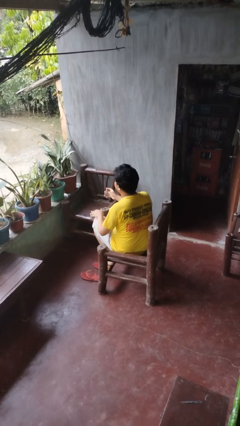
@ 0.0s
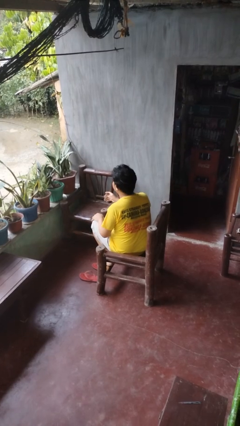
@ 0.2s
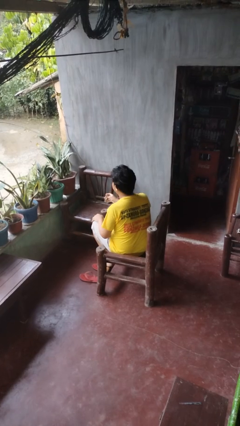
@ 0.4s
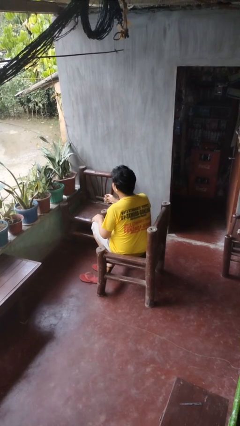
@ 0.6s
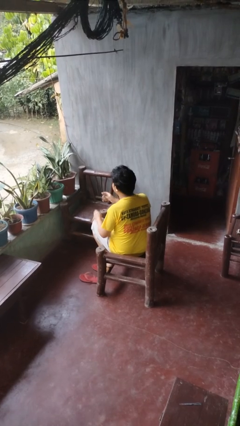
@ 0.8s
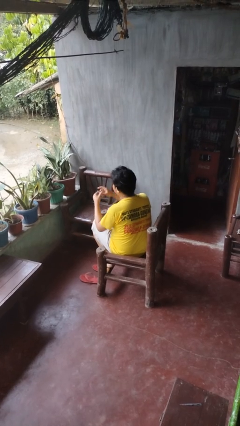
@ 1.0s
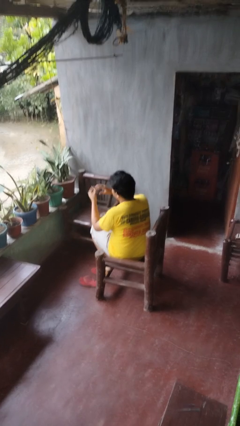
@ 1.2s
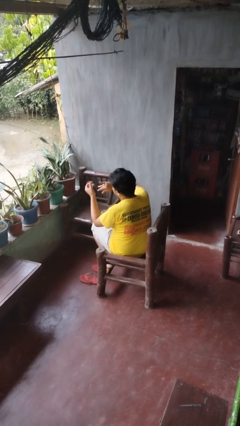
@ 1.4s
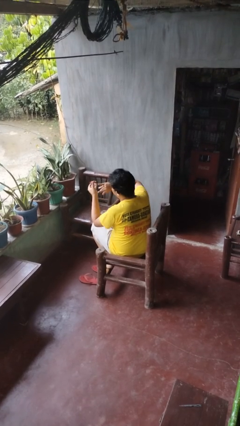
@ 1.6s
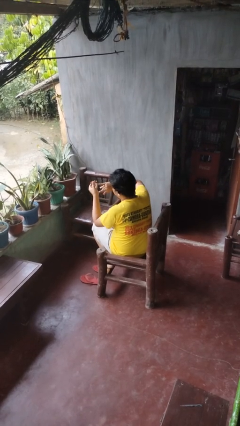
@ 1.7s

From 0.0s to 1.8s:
person clips fingernails

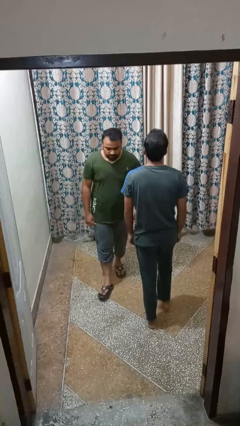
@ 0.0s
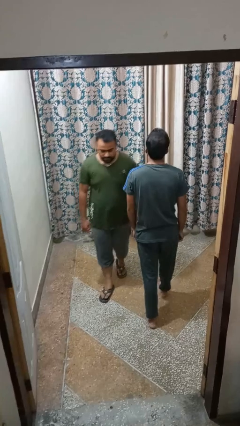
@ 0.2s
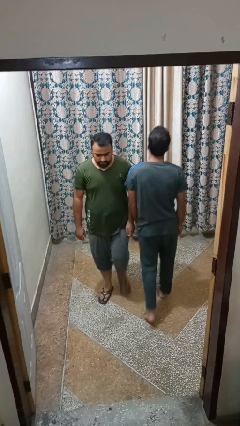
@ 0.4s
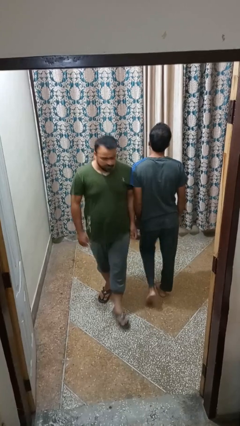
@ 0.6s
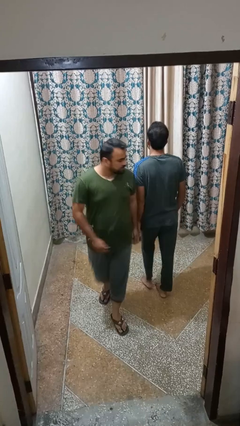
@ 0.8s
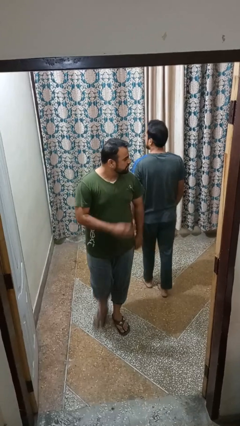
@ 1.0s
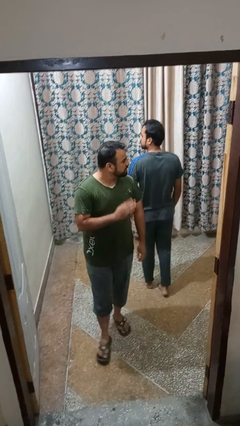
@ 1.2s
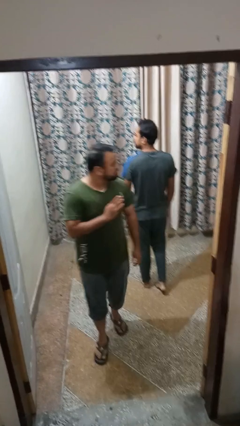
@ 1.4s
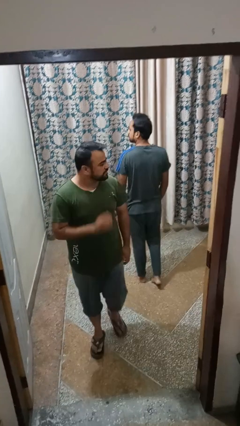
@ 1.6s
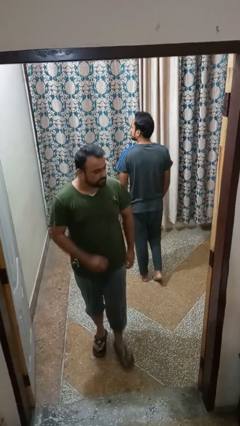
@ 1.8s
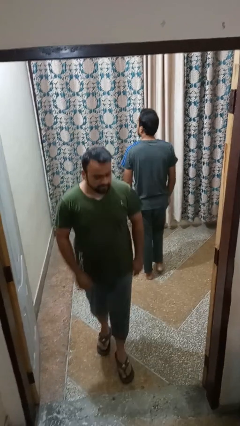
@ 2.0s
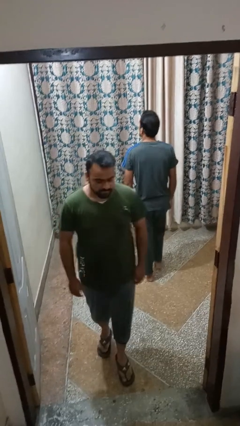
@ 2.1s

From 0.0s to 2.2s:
person bumps into person

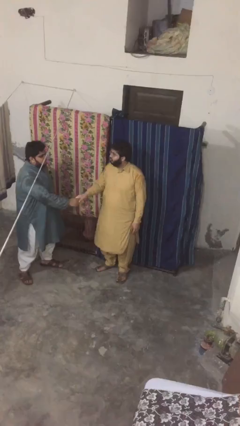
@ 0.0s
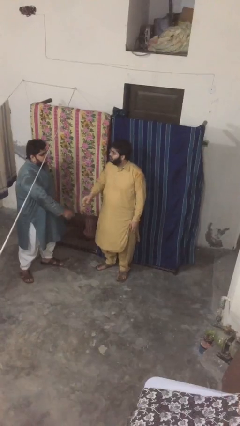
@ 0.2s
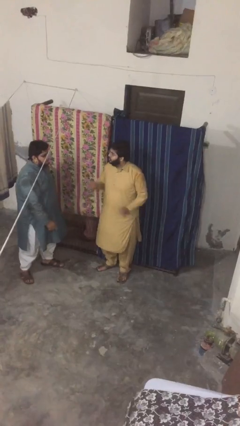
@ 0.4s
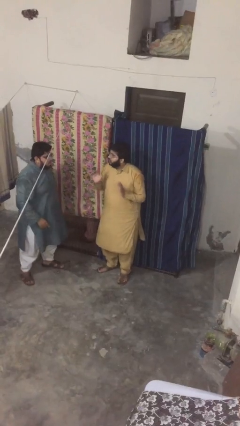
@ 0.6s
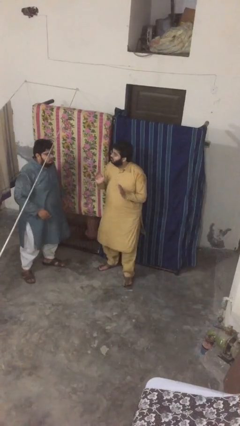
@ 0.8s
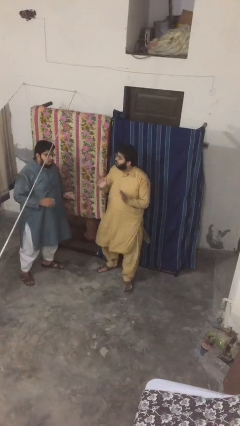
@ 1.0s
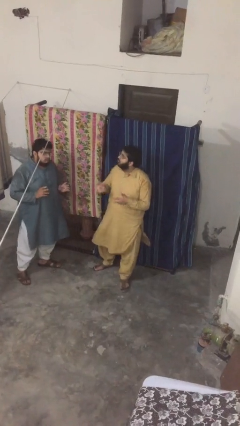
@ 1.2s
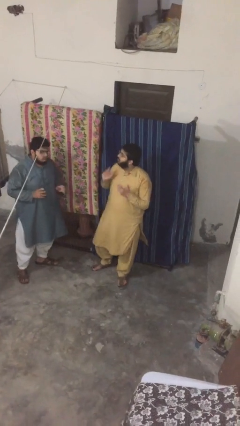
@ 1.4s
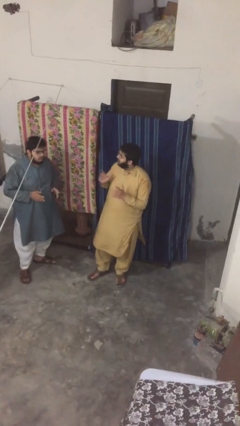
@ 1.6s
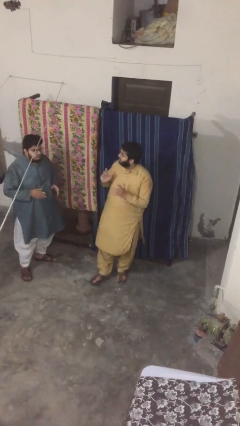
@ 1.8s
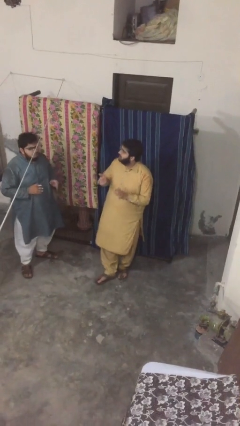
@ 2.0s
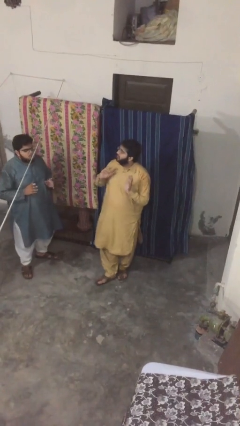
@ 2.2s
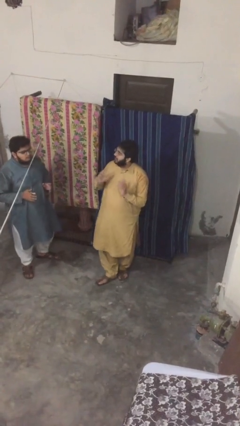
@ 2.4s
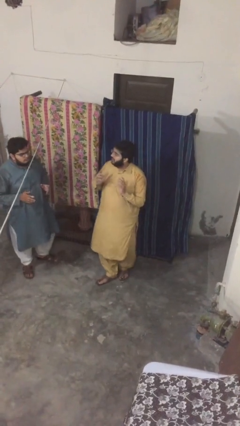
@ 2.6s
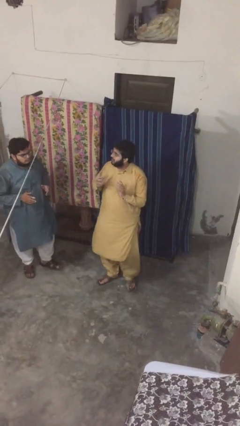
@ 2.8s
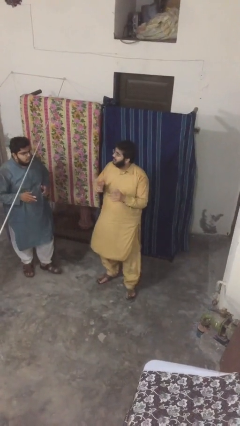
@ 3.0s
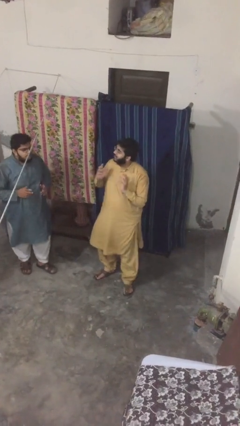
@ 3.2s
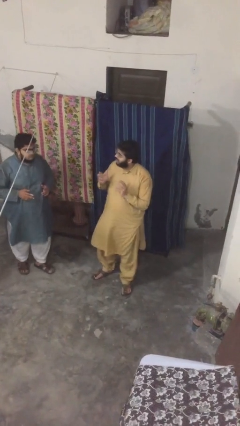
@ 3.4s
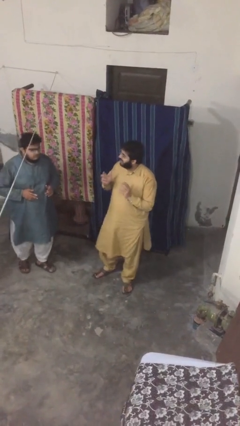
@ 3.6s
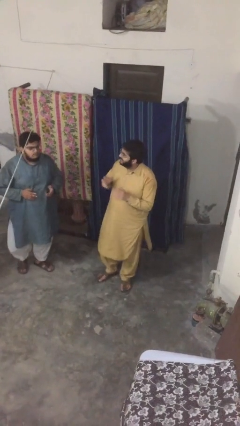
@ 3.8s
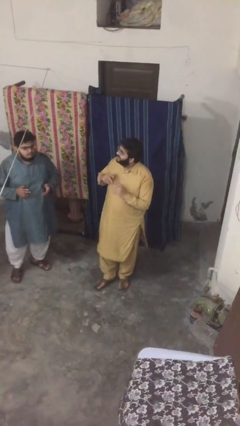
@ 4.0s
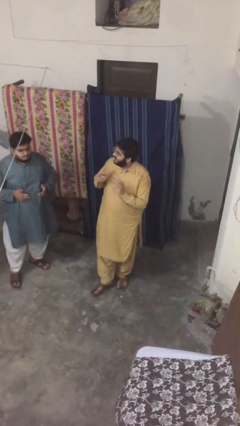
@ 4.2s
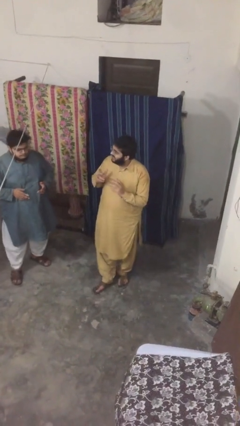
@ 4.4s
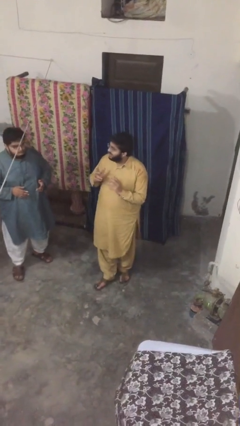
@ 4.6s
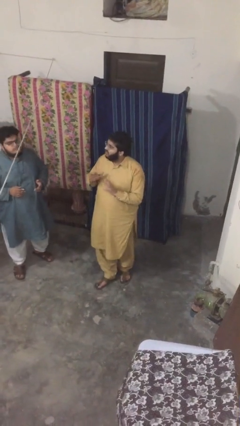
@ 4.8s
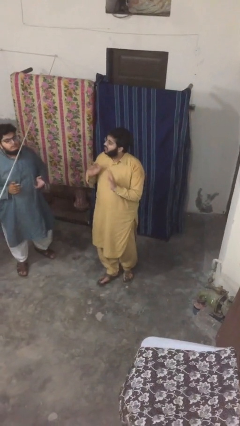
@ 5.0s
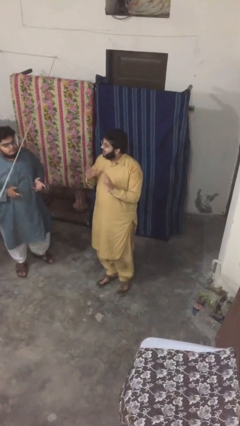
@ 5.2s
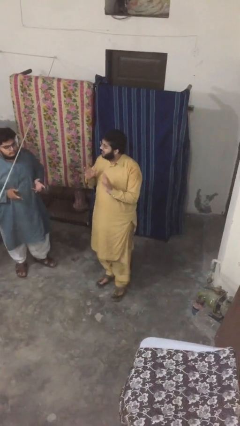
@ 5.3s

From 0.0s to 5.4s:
person talks to person

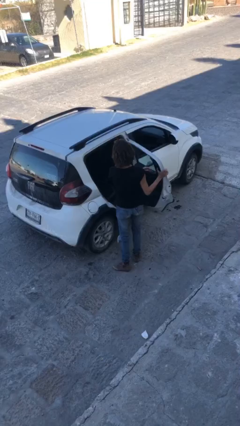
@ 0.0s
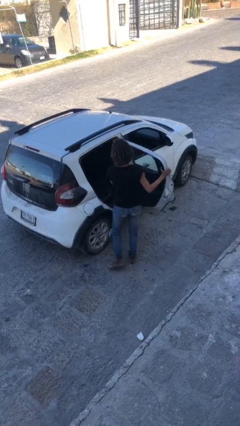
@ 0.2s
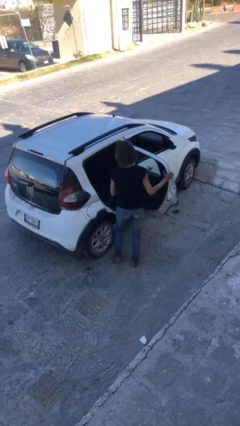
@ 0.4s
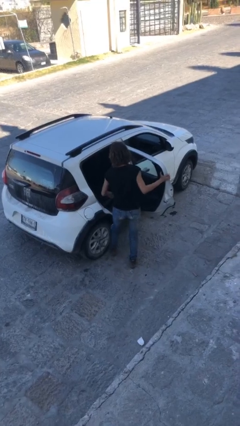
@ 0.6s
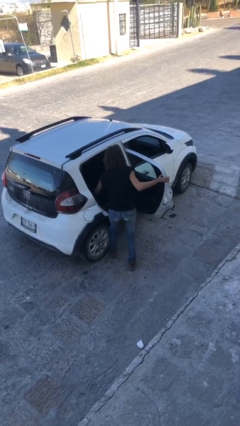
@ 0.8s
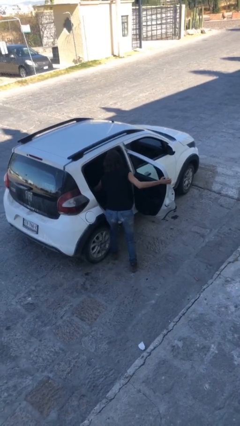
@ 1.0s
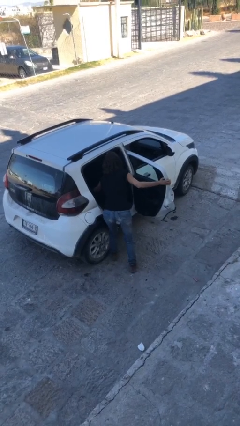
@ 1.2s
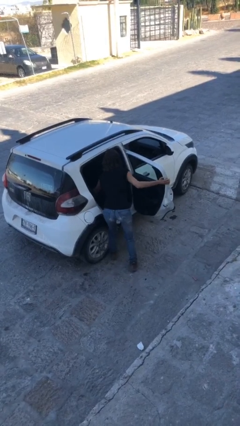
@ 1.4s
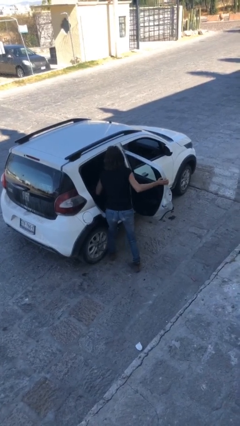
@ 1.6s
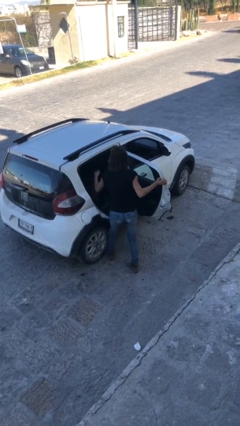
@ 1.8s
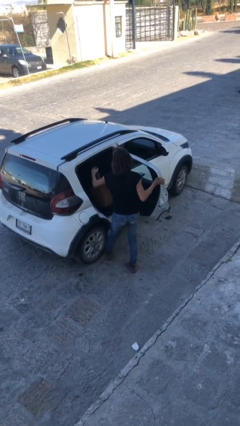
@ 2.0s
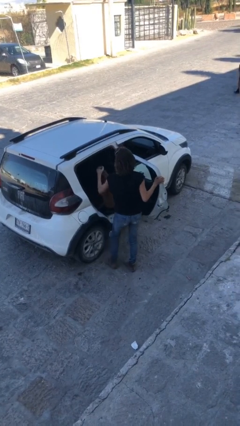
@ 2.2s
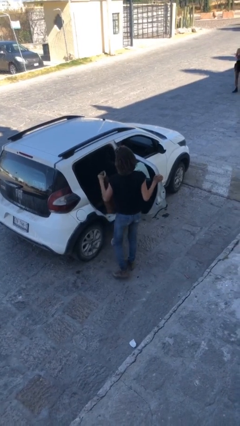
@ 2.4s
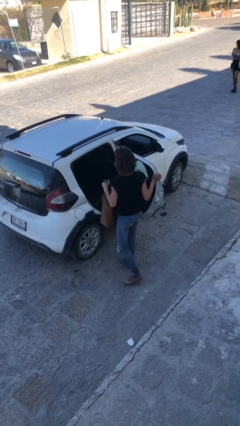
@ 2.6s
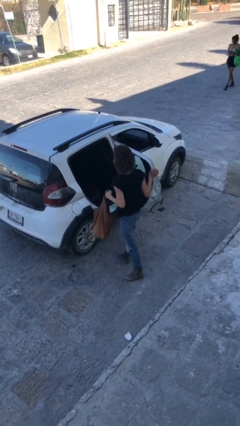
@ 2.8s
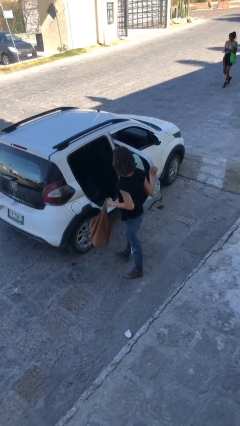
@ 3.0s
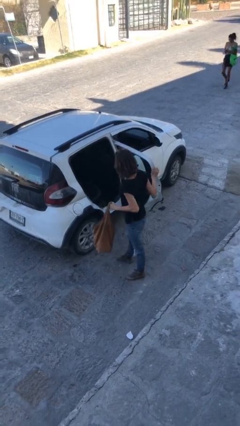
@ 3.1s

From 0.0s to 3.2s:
person unloads car

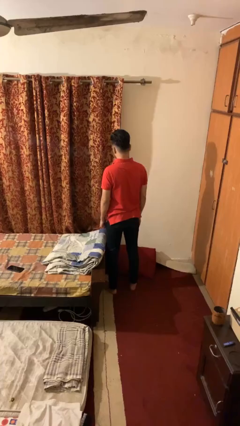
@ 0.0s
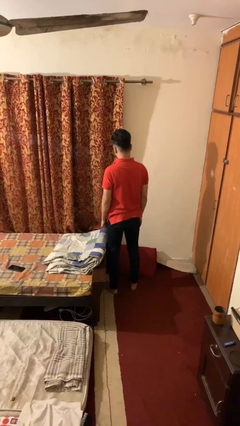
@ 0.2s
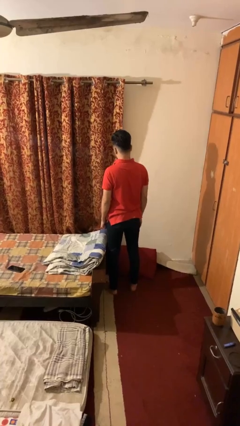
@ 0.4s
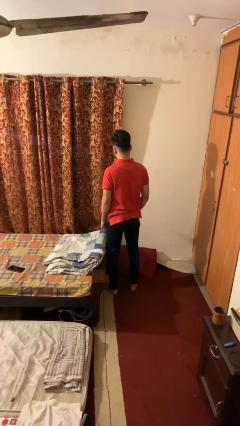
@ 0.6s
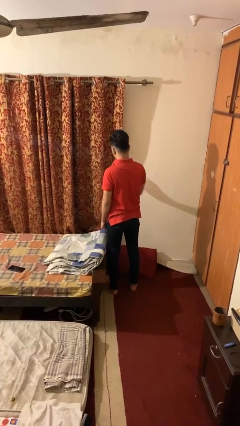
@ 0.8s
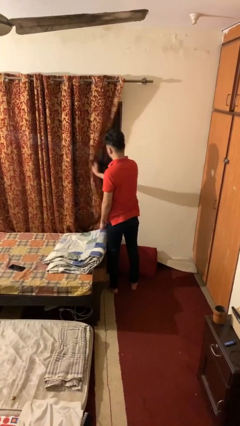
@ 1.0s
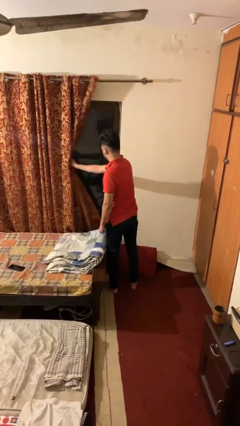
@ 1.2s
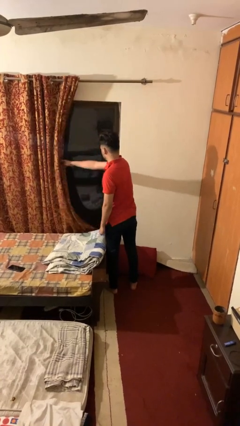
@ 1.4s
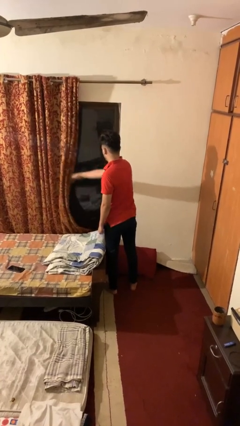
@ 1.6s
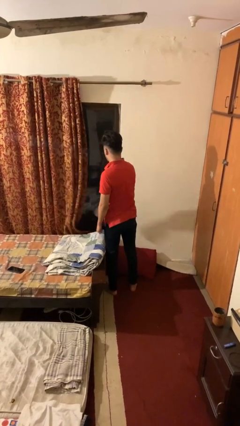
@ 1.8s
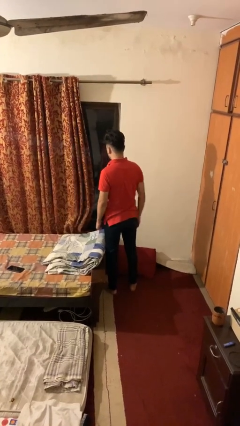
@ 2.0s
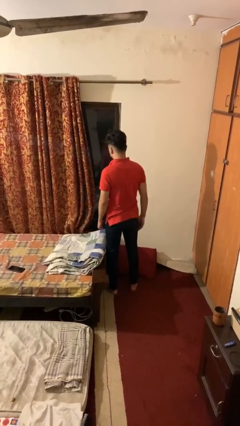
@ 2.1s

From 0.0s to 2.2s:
person opens curtains

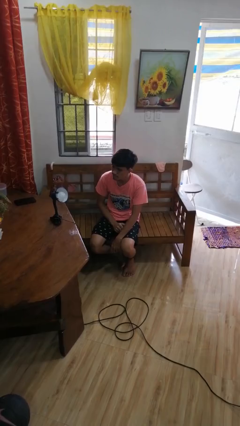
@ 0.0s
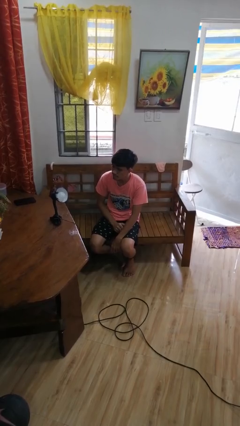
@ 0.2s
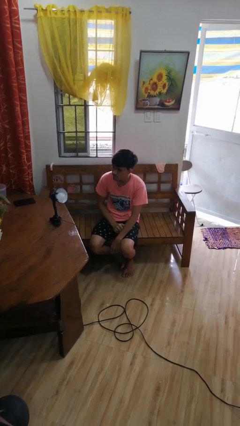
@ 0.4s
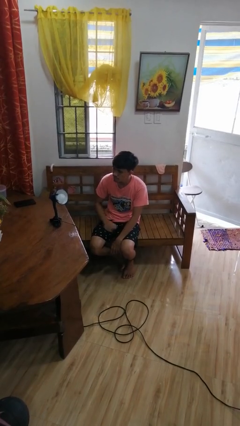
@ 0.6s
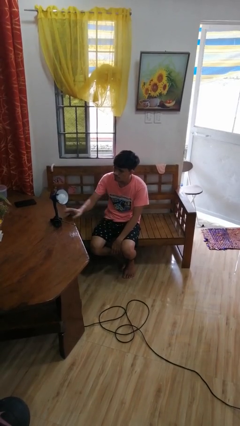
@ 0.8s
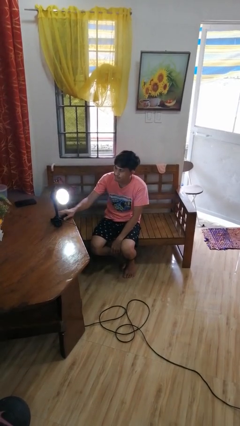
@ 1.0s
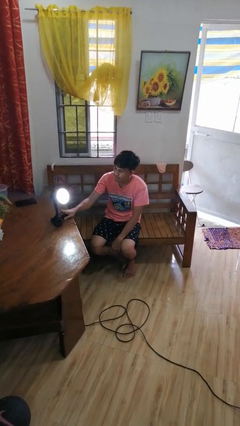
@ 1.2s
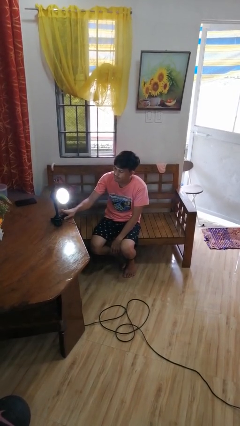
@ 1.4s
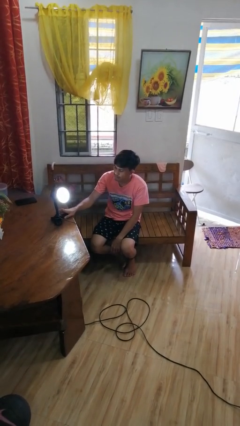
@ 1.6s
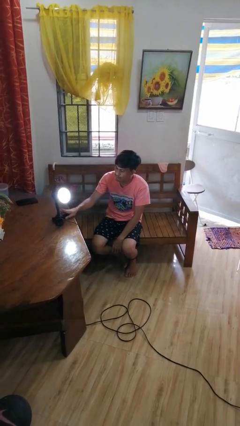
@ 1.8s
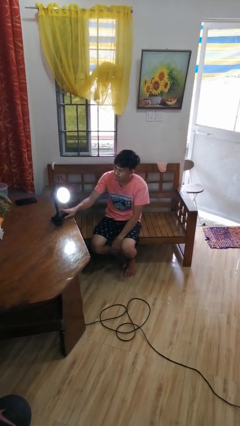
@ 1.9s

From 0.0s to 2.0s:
person turns on lamp

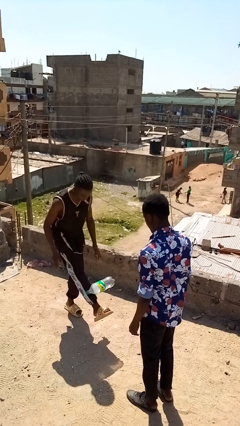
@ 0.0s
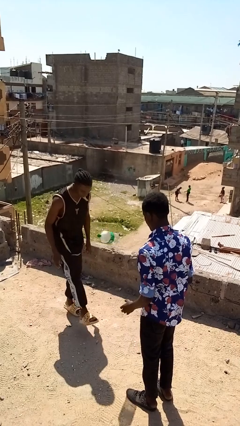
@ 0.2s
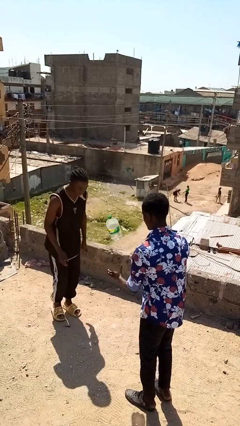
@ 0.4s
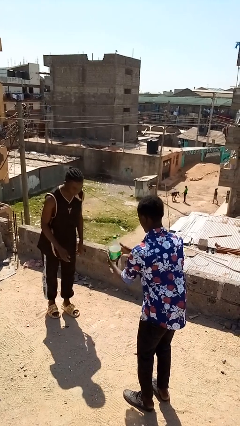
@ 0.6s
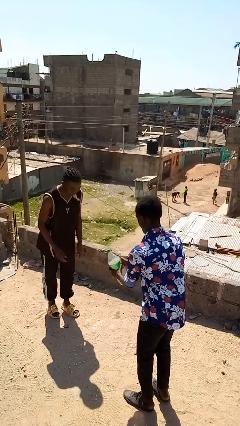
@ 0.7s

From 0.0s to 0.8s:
person kicks object to person
